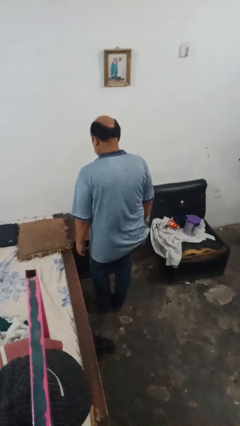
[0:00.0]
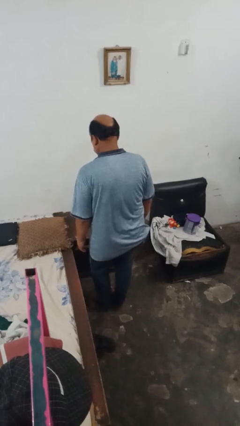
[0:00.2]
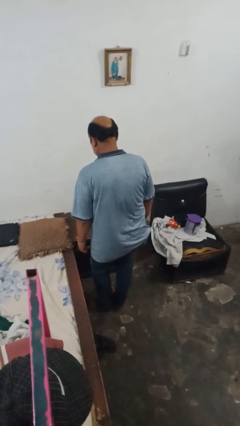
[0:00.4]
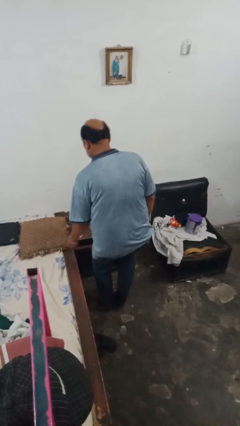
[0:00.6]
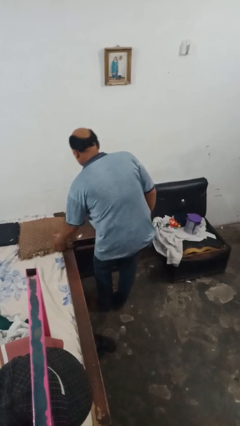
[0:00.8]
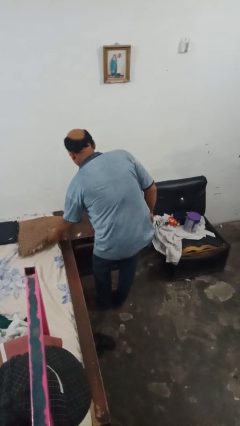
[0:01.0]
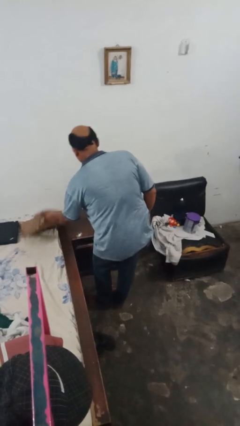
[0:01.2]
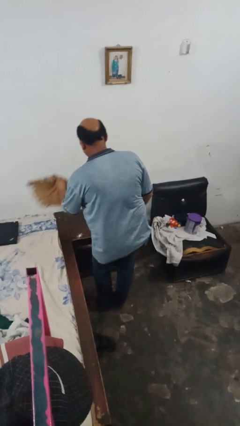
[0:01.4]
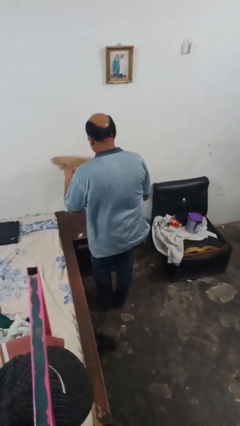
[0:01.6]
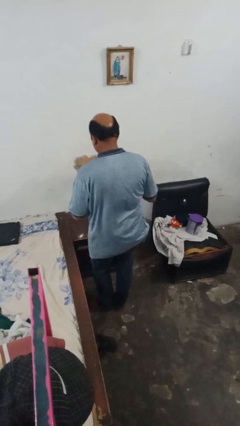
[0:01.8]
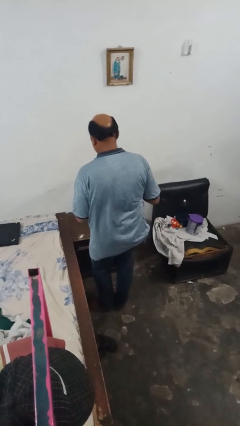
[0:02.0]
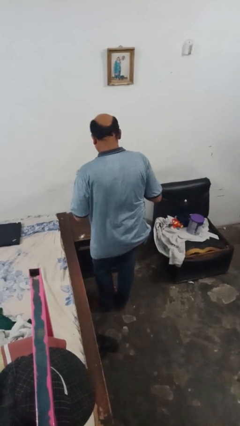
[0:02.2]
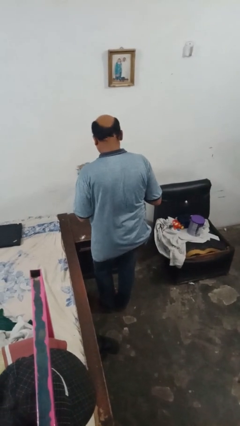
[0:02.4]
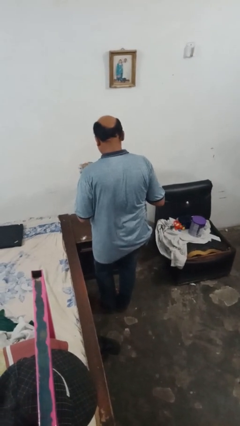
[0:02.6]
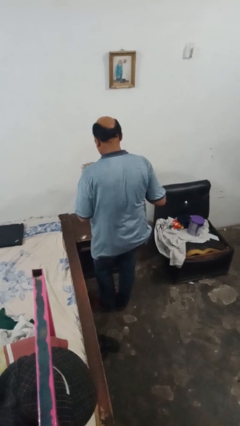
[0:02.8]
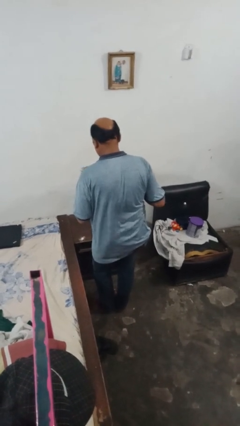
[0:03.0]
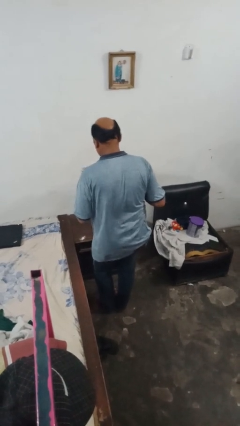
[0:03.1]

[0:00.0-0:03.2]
person picks up object from bed

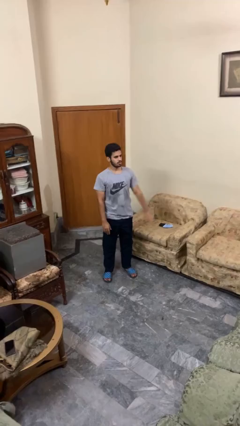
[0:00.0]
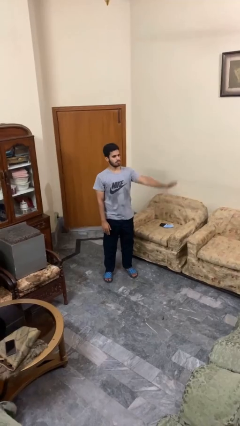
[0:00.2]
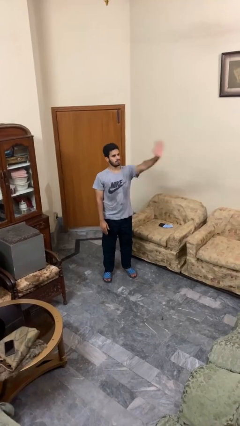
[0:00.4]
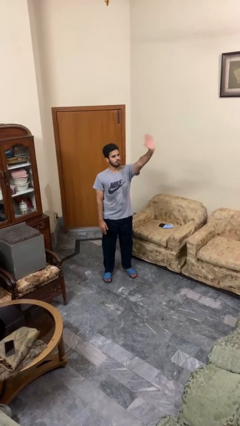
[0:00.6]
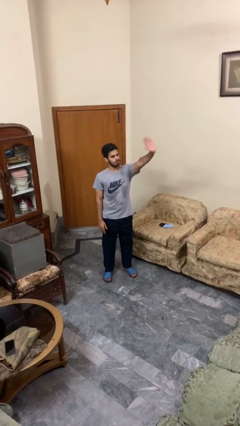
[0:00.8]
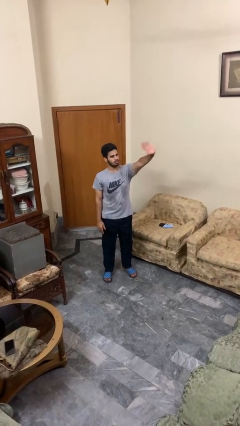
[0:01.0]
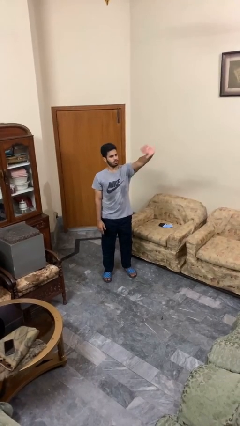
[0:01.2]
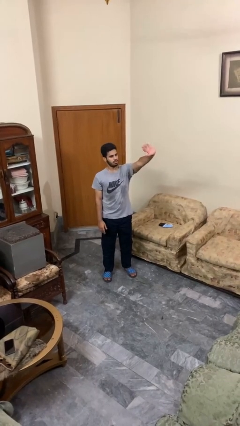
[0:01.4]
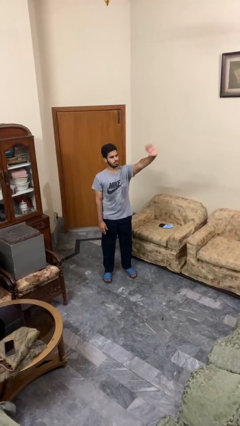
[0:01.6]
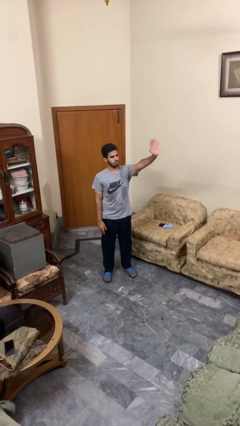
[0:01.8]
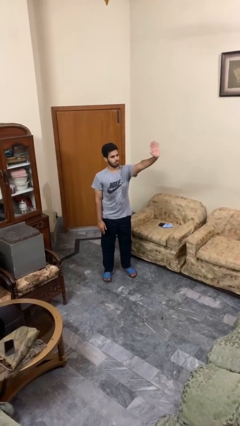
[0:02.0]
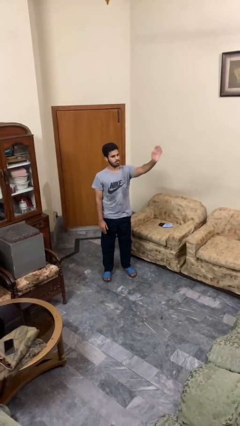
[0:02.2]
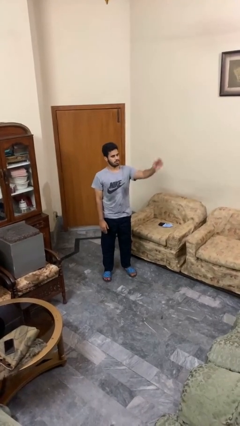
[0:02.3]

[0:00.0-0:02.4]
person waves at person

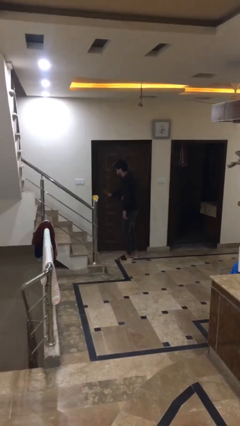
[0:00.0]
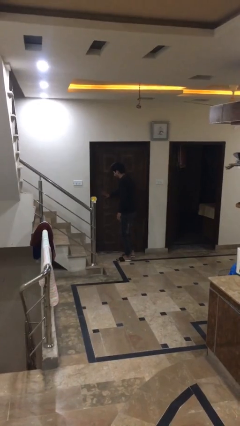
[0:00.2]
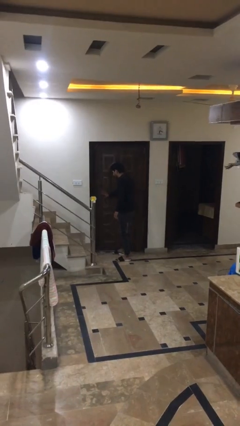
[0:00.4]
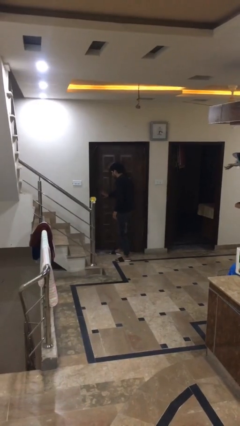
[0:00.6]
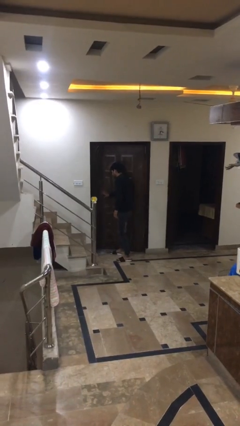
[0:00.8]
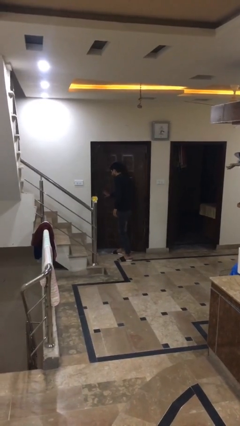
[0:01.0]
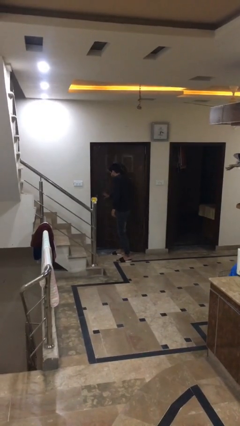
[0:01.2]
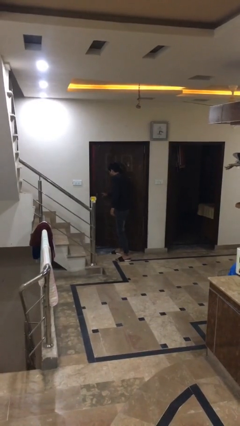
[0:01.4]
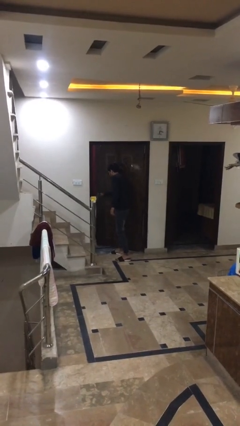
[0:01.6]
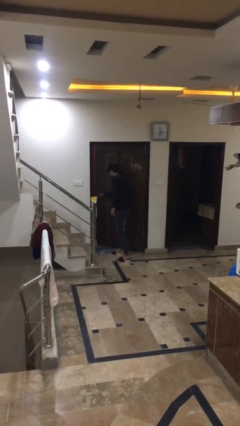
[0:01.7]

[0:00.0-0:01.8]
person opens facility door

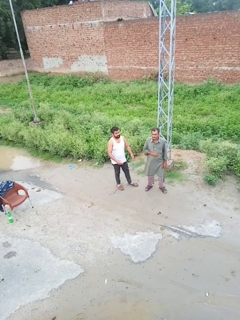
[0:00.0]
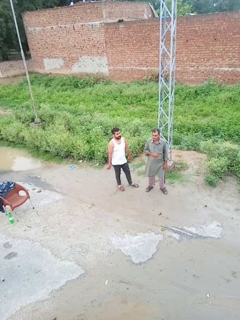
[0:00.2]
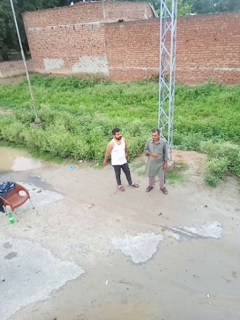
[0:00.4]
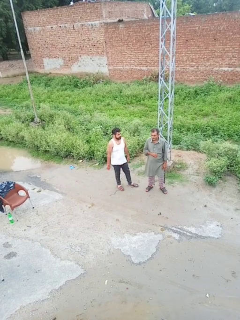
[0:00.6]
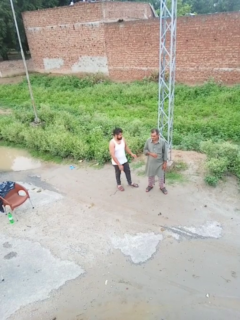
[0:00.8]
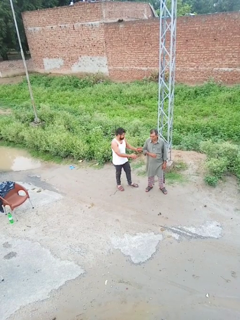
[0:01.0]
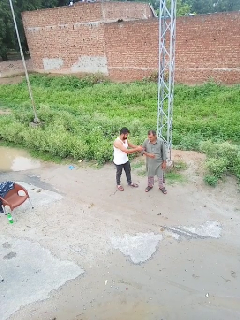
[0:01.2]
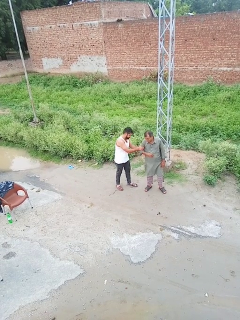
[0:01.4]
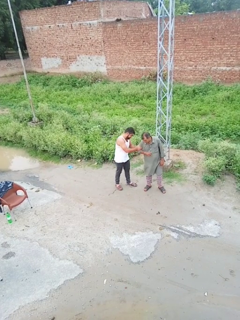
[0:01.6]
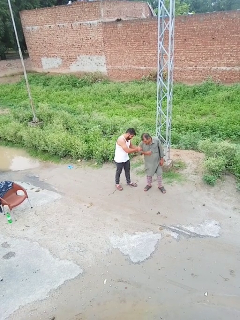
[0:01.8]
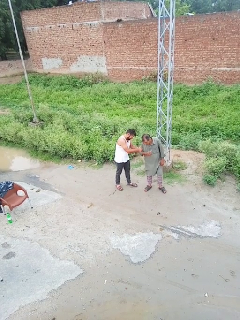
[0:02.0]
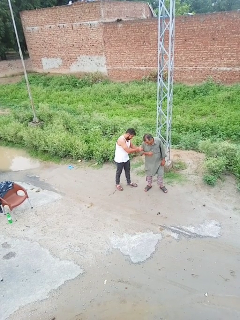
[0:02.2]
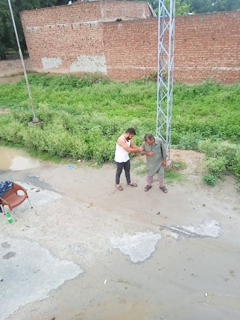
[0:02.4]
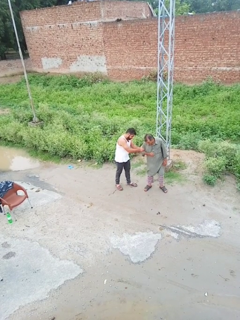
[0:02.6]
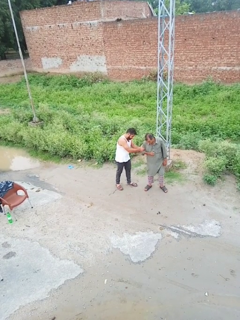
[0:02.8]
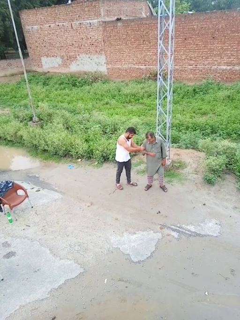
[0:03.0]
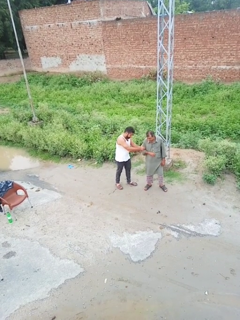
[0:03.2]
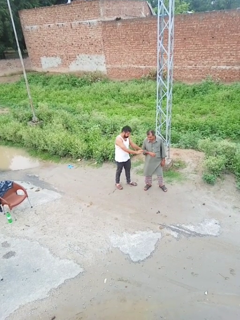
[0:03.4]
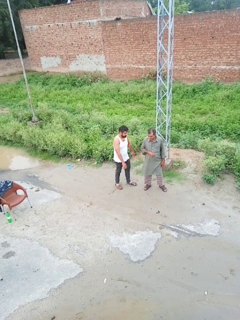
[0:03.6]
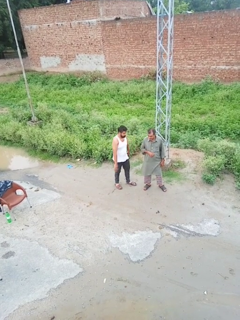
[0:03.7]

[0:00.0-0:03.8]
person grabs person by forearm

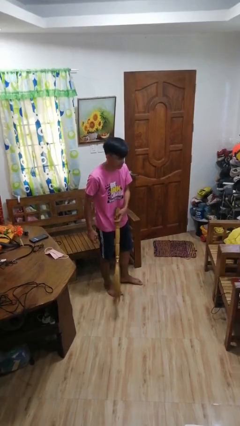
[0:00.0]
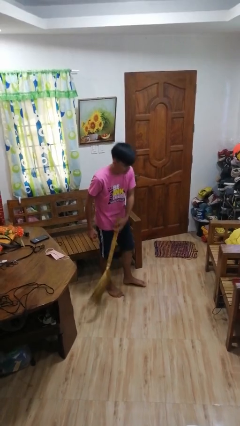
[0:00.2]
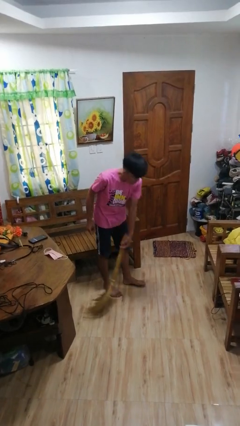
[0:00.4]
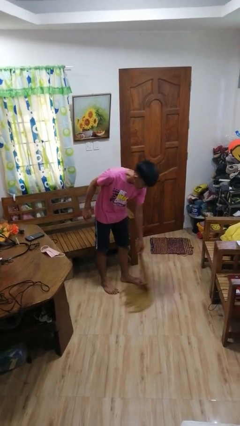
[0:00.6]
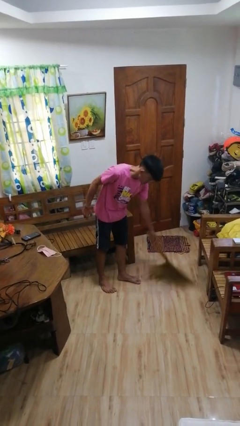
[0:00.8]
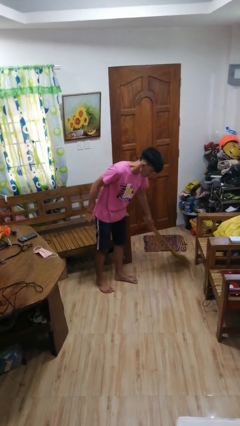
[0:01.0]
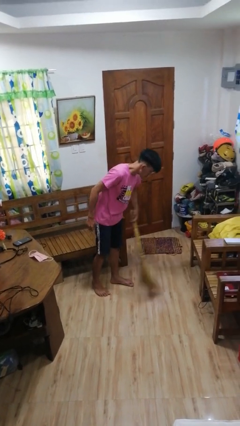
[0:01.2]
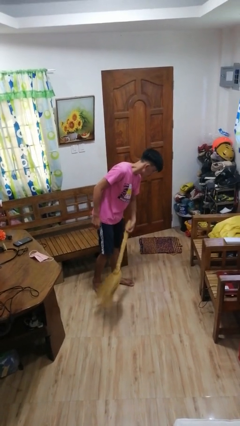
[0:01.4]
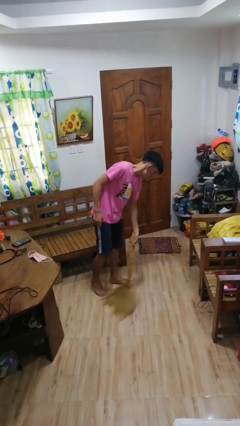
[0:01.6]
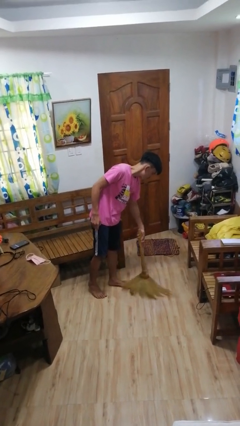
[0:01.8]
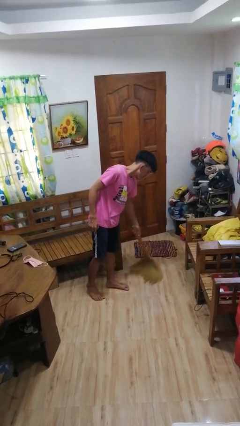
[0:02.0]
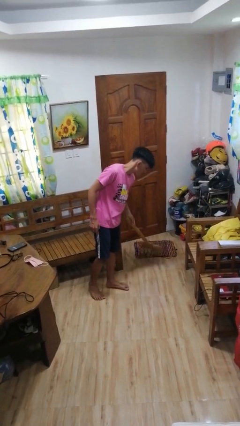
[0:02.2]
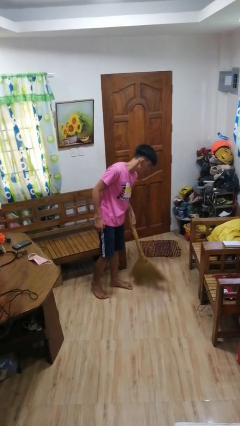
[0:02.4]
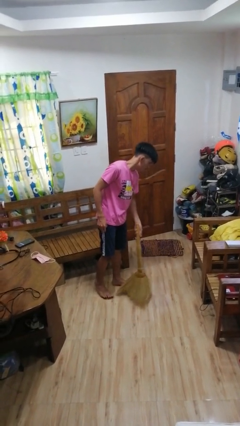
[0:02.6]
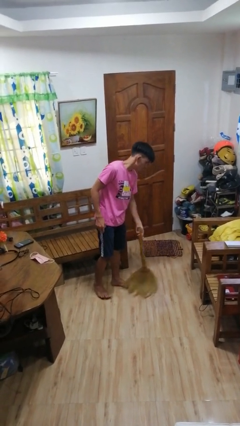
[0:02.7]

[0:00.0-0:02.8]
person sweeps floor

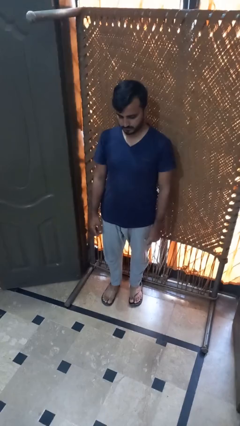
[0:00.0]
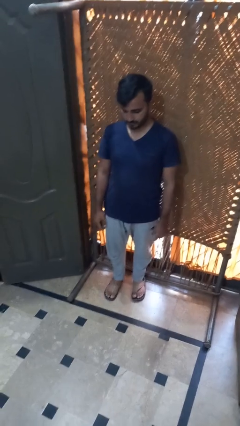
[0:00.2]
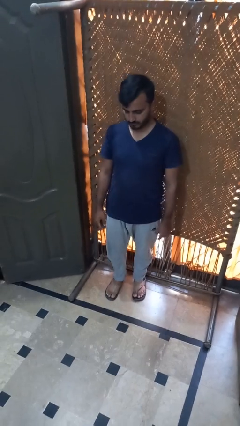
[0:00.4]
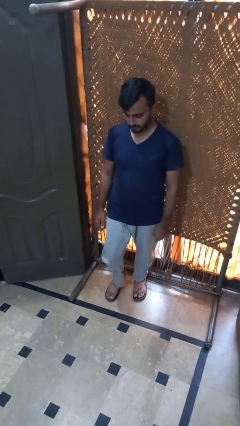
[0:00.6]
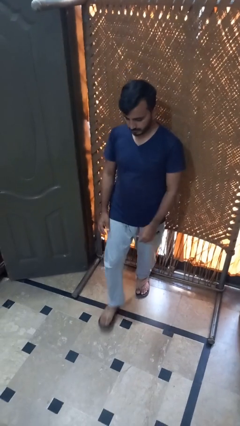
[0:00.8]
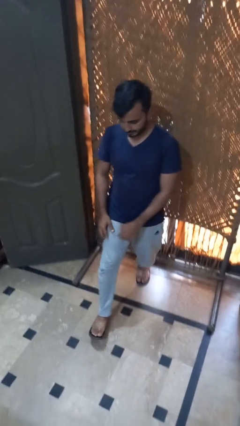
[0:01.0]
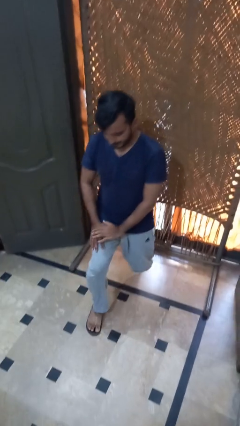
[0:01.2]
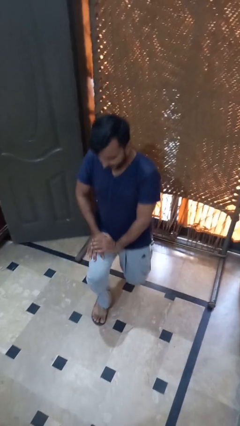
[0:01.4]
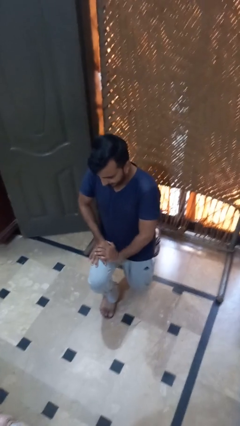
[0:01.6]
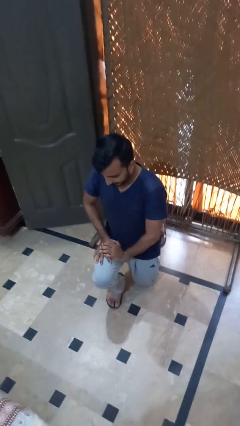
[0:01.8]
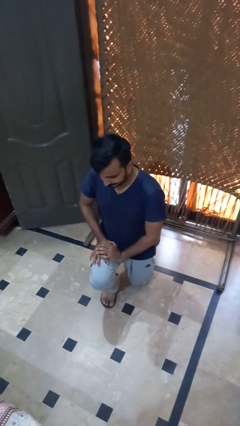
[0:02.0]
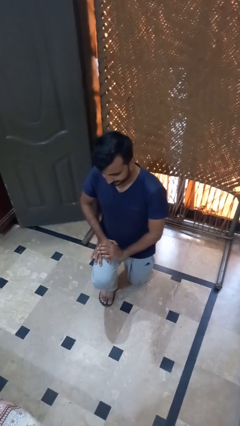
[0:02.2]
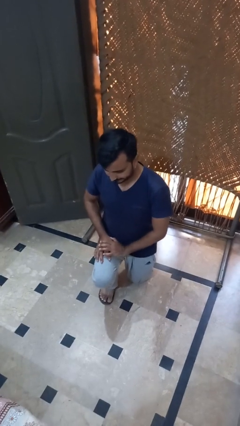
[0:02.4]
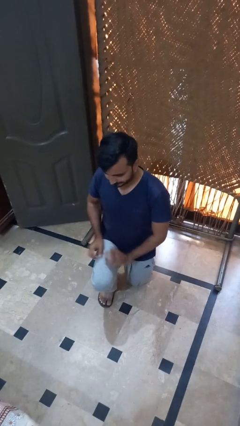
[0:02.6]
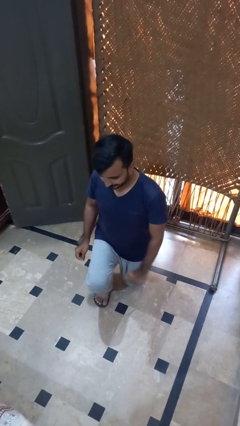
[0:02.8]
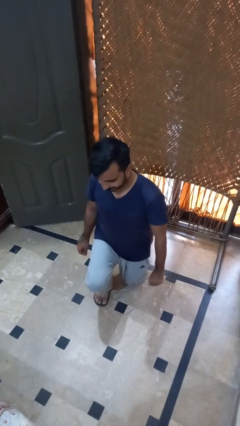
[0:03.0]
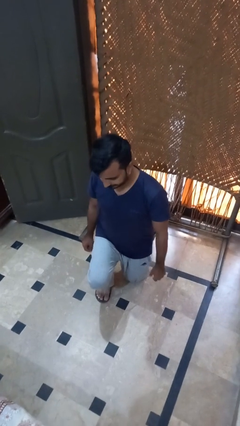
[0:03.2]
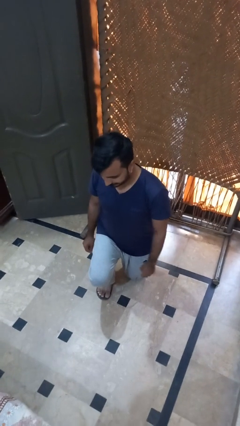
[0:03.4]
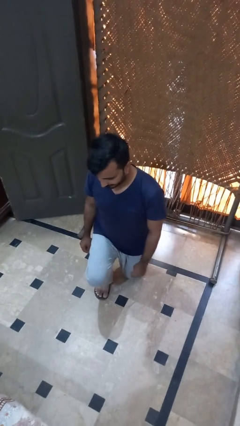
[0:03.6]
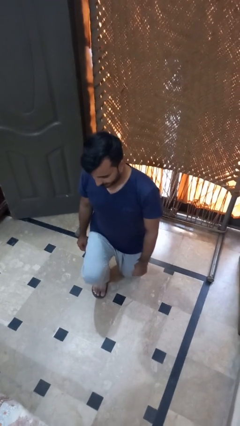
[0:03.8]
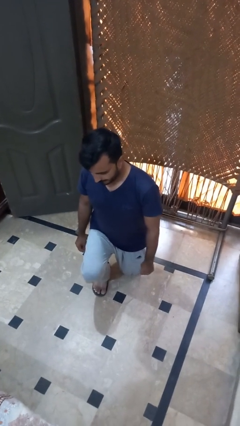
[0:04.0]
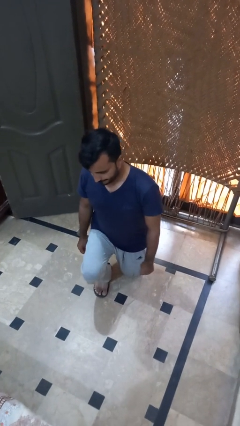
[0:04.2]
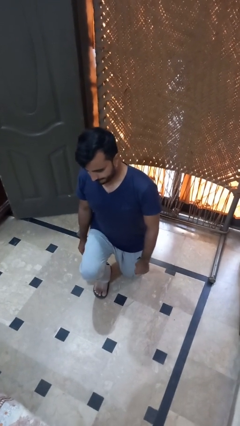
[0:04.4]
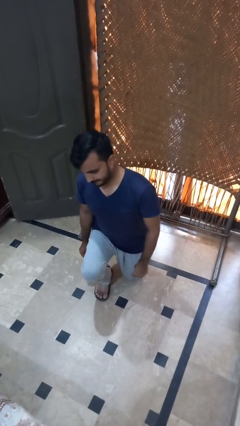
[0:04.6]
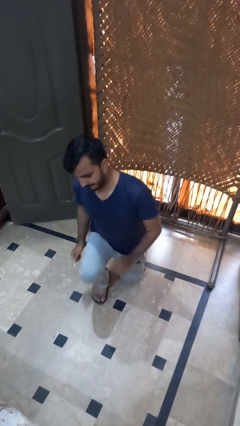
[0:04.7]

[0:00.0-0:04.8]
person exercises with lunges
